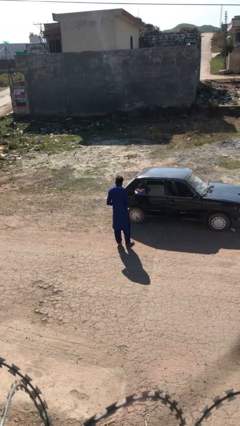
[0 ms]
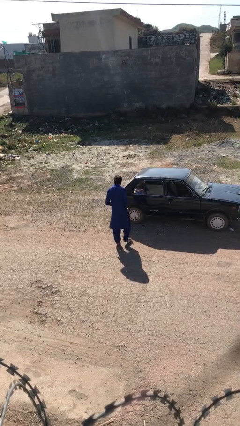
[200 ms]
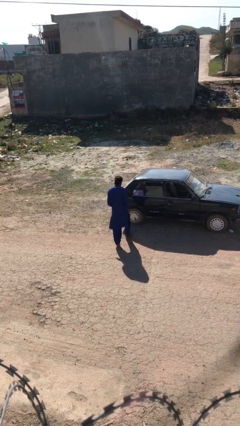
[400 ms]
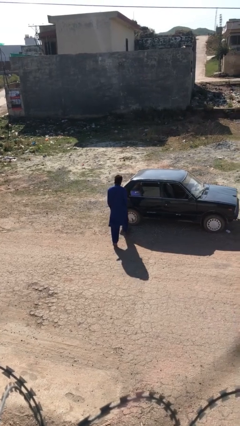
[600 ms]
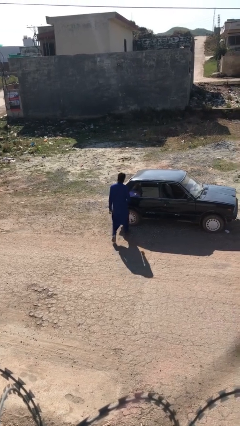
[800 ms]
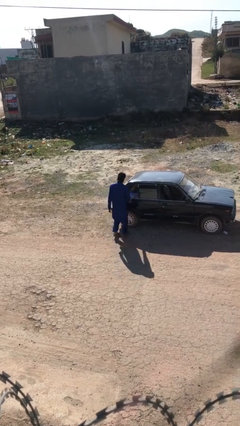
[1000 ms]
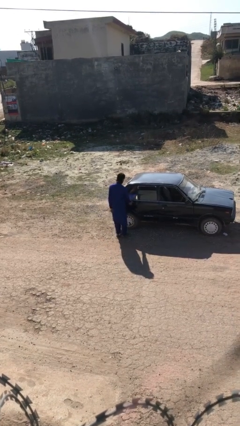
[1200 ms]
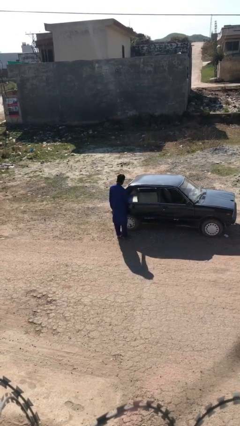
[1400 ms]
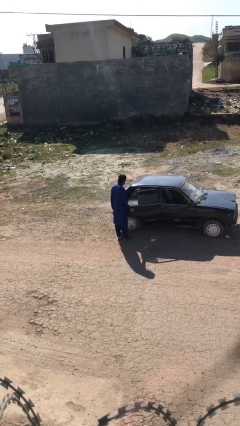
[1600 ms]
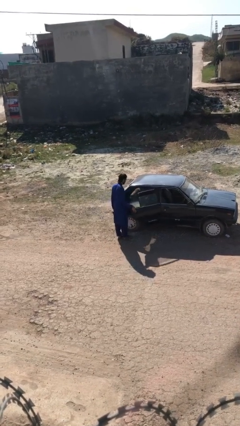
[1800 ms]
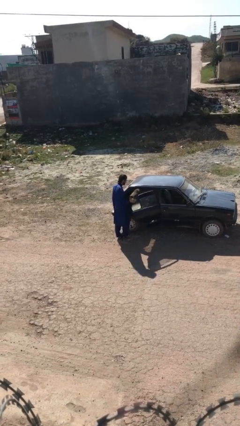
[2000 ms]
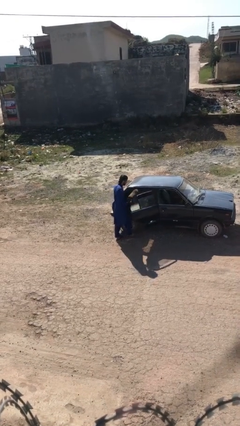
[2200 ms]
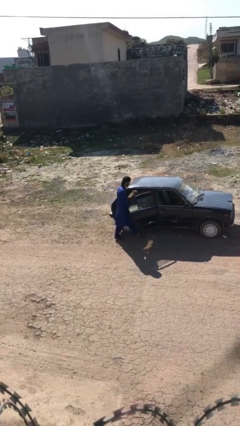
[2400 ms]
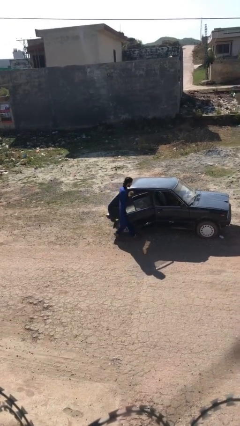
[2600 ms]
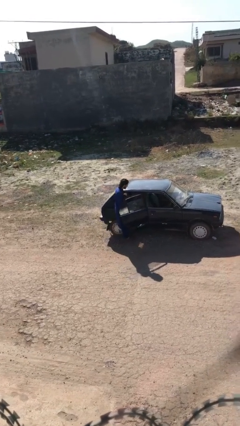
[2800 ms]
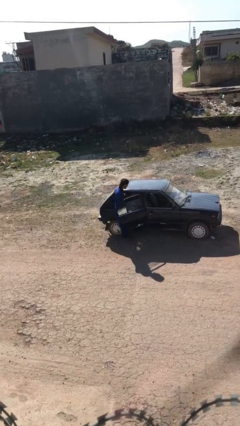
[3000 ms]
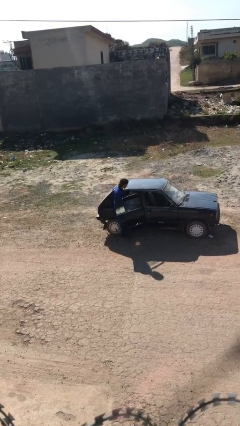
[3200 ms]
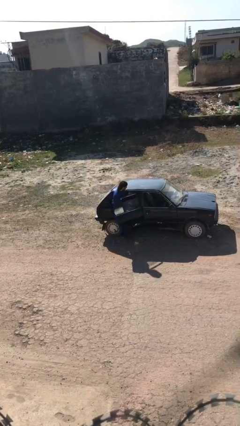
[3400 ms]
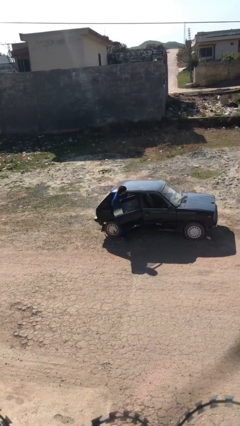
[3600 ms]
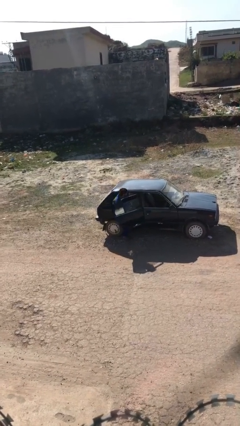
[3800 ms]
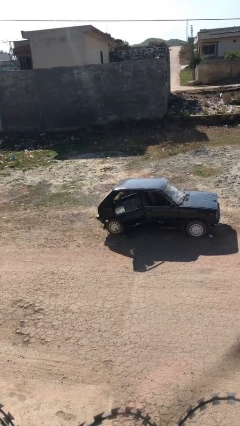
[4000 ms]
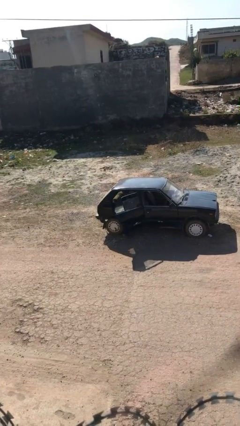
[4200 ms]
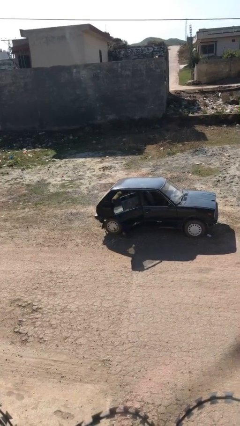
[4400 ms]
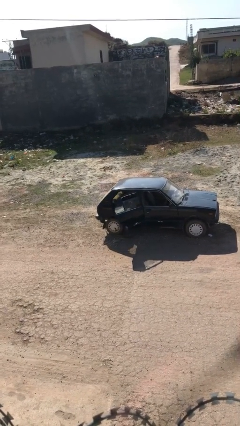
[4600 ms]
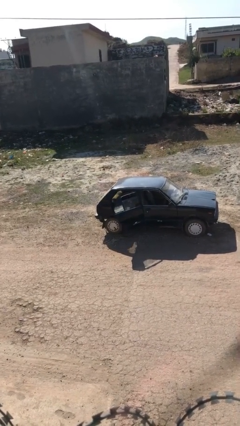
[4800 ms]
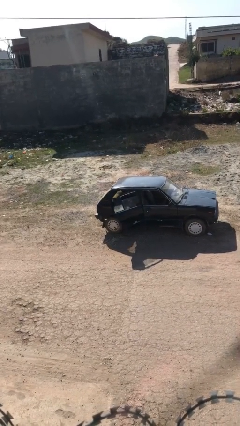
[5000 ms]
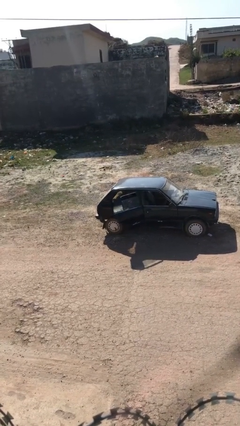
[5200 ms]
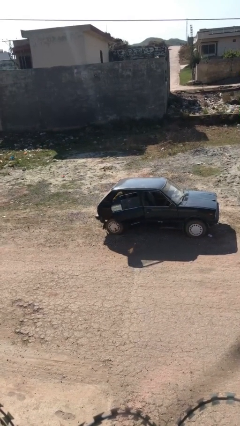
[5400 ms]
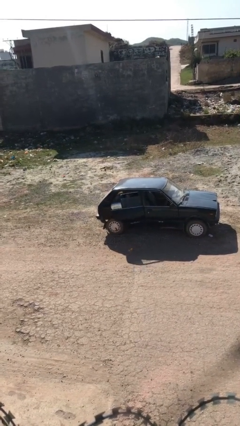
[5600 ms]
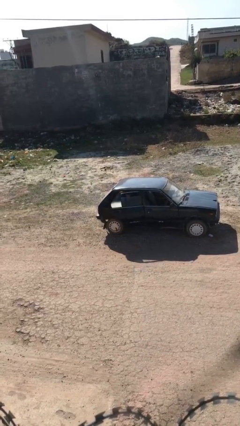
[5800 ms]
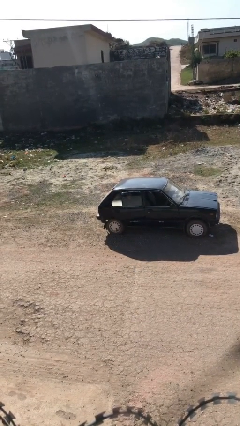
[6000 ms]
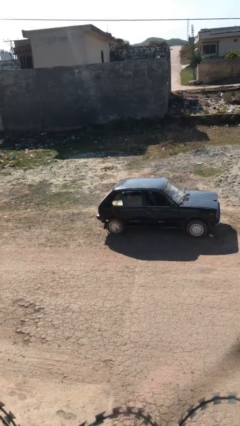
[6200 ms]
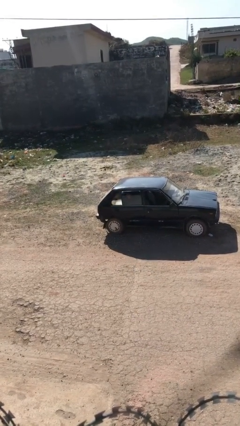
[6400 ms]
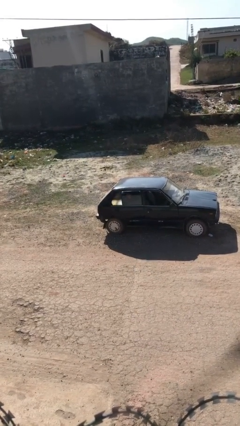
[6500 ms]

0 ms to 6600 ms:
car picks up person

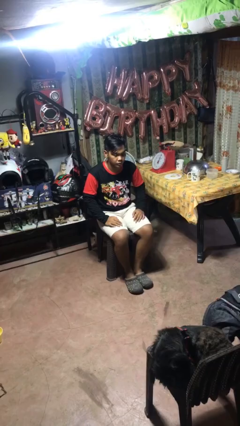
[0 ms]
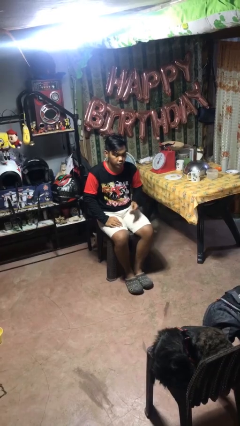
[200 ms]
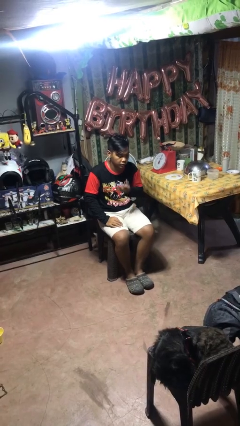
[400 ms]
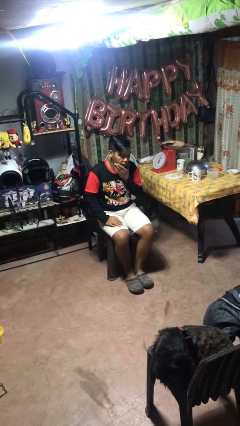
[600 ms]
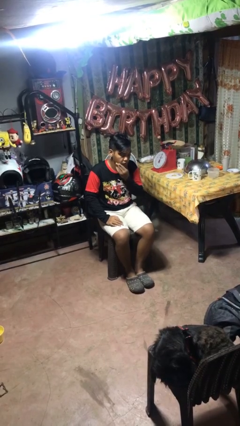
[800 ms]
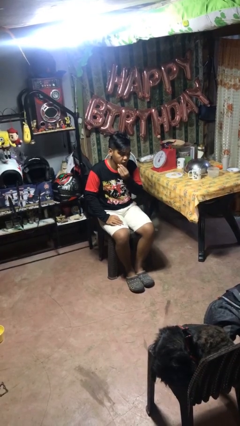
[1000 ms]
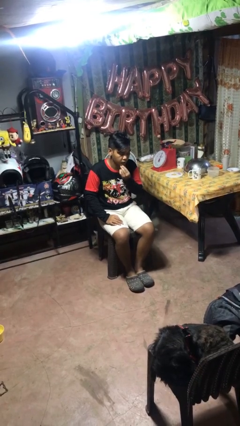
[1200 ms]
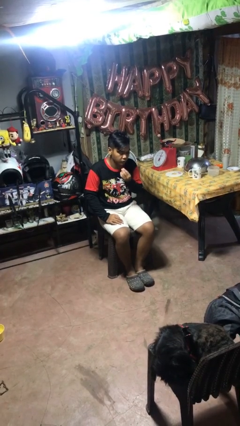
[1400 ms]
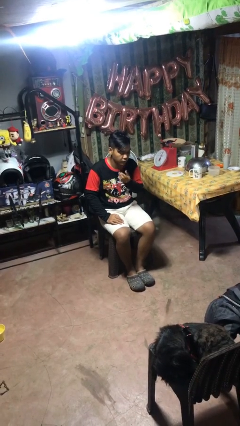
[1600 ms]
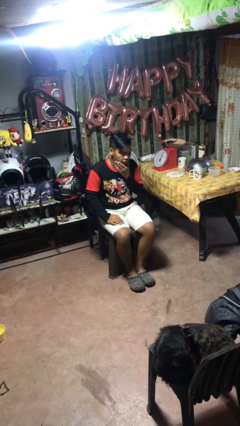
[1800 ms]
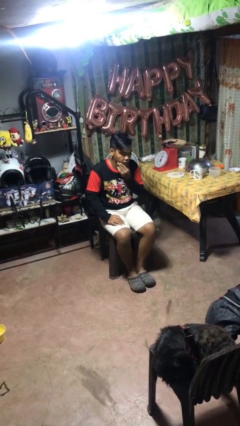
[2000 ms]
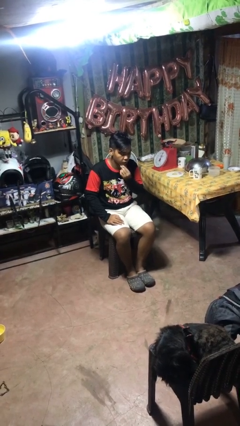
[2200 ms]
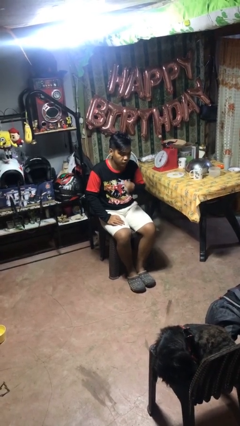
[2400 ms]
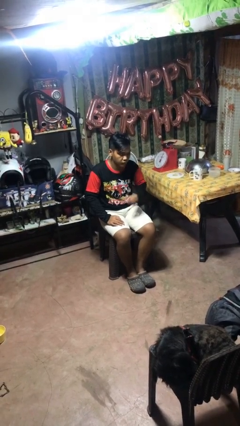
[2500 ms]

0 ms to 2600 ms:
person strokes chin

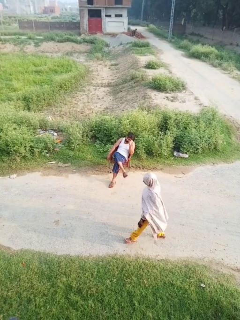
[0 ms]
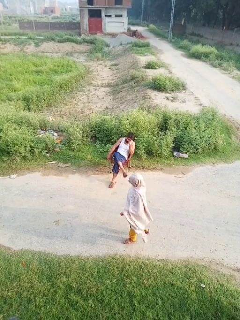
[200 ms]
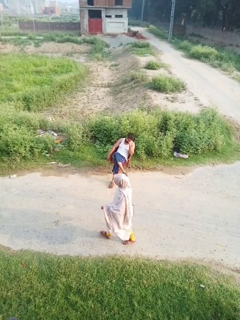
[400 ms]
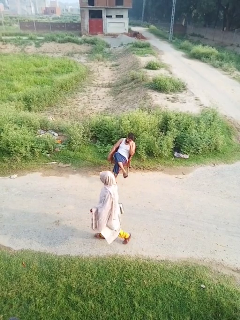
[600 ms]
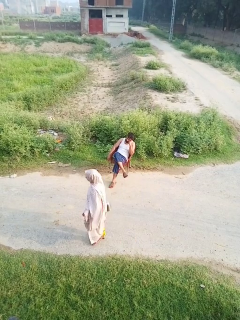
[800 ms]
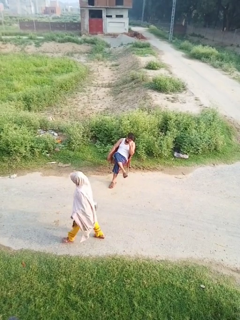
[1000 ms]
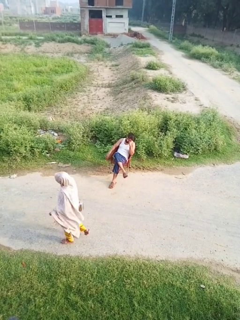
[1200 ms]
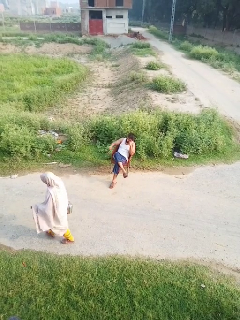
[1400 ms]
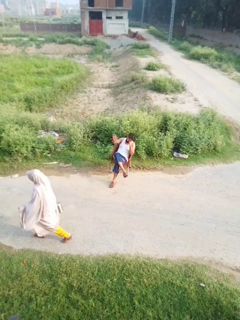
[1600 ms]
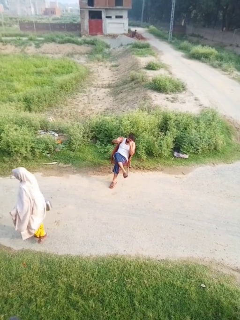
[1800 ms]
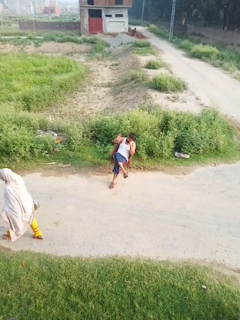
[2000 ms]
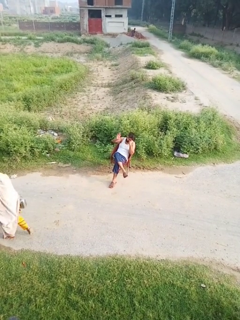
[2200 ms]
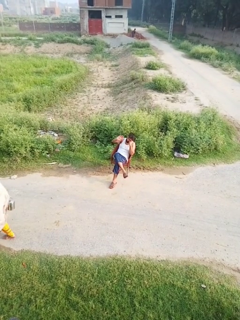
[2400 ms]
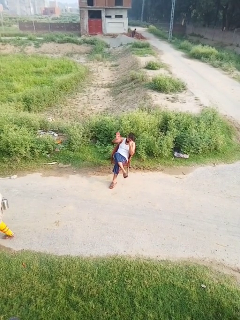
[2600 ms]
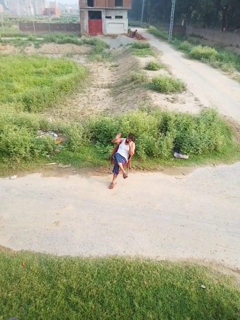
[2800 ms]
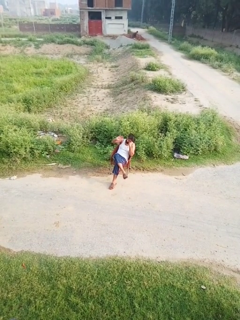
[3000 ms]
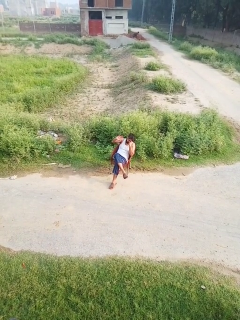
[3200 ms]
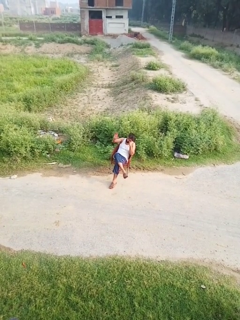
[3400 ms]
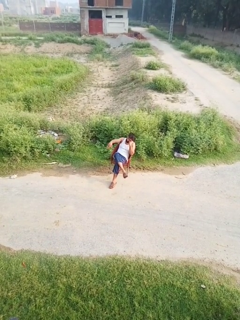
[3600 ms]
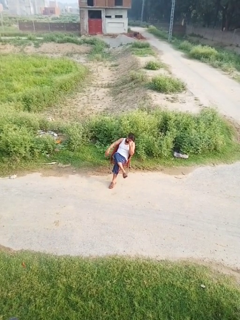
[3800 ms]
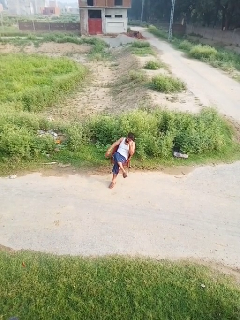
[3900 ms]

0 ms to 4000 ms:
person waves at person

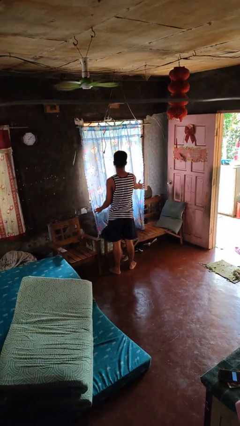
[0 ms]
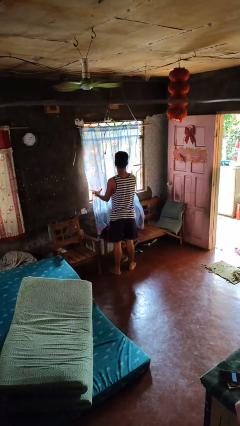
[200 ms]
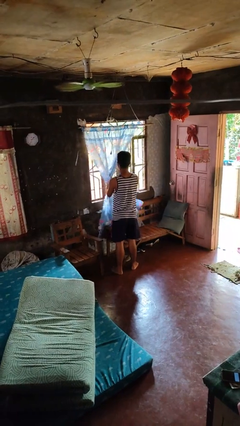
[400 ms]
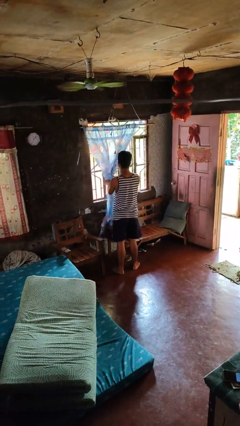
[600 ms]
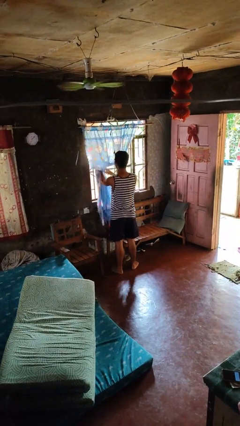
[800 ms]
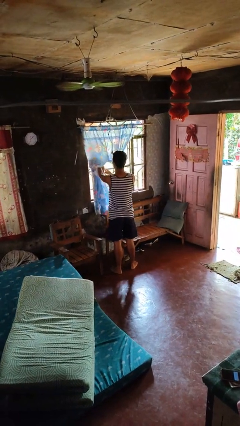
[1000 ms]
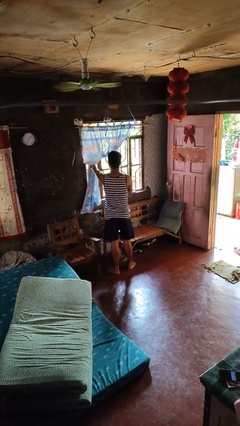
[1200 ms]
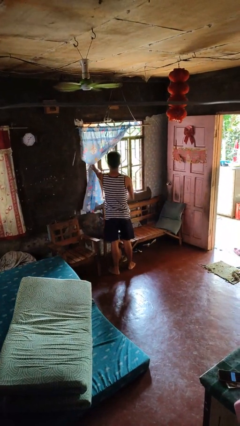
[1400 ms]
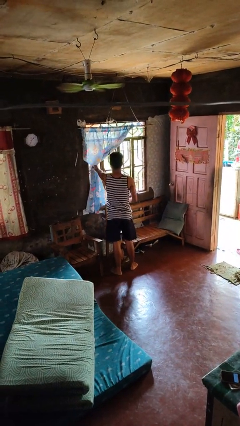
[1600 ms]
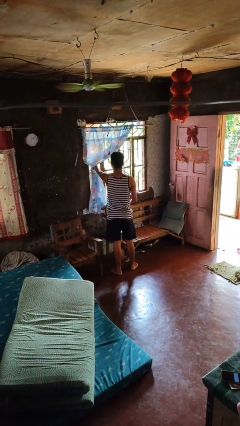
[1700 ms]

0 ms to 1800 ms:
person opens curtains

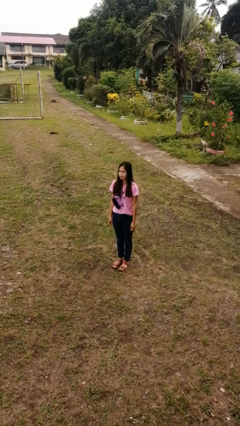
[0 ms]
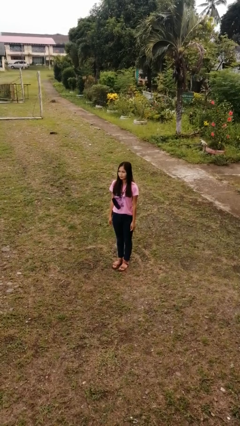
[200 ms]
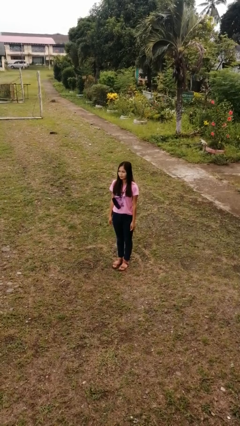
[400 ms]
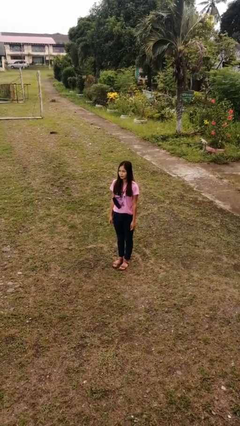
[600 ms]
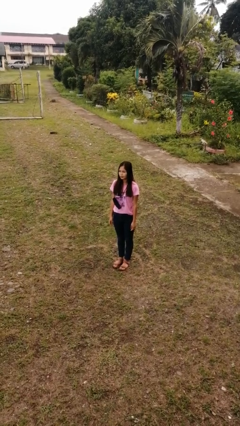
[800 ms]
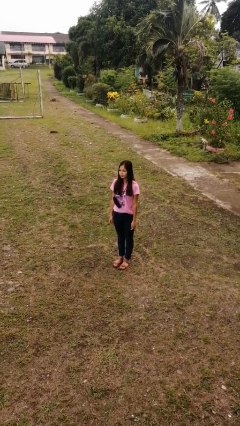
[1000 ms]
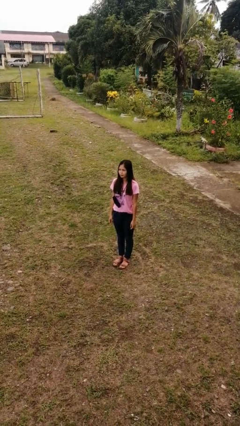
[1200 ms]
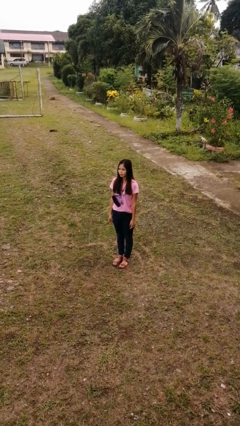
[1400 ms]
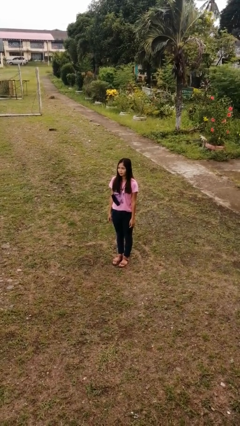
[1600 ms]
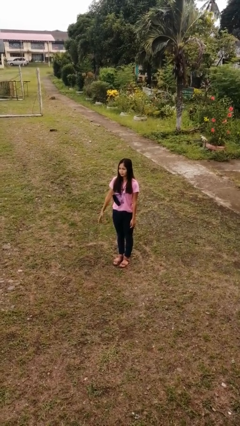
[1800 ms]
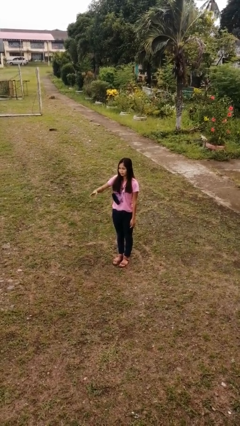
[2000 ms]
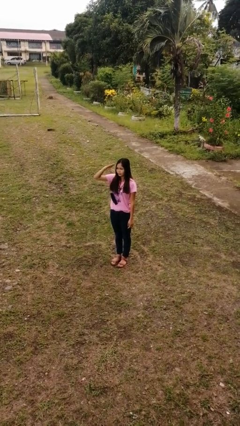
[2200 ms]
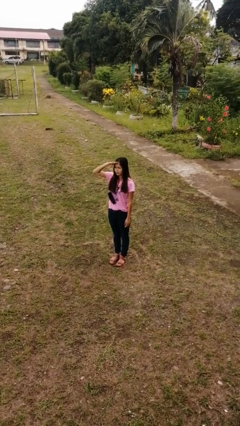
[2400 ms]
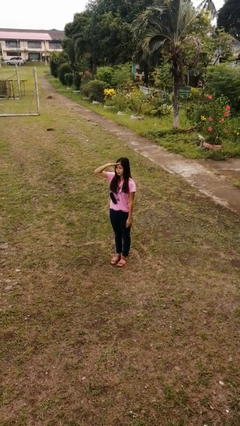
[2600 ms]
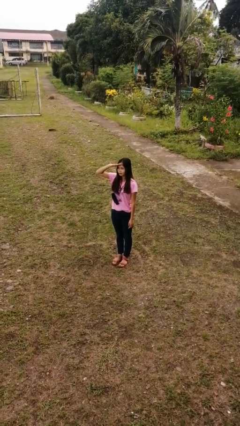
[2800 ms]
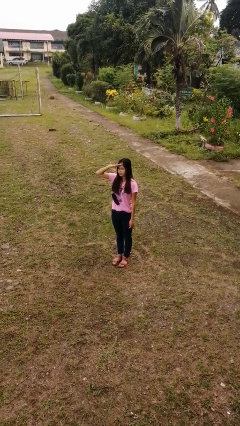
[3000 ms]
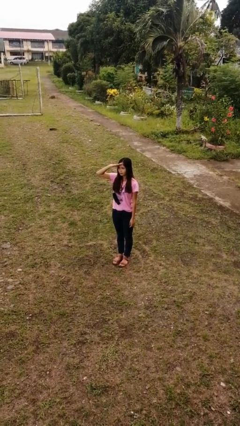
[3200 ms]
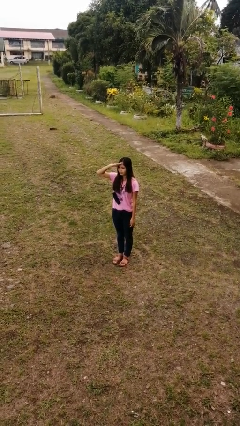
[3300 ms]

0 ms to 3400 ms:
person salutes

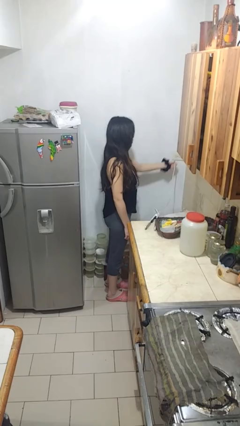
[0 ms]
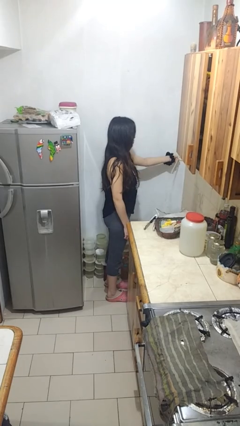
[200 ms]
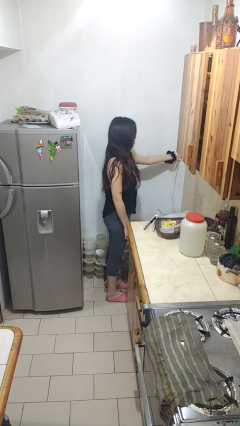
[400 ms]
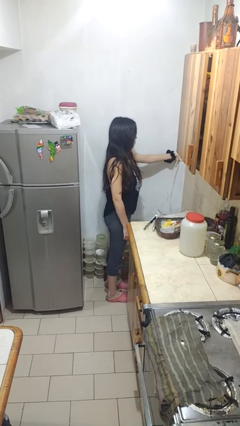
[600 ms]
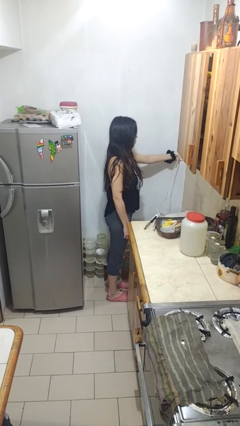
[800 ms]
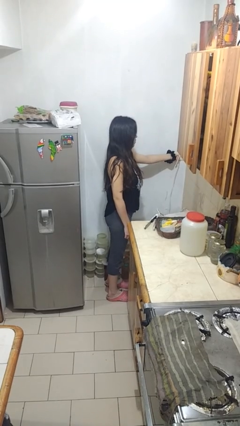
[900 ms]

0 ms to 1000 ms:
person plugs into electrical socket
